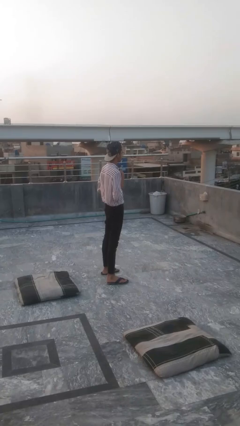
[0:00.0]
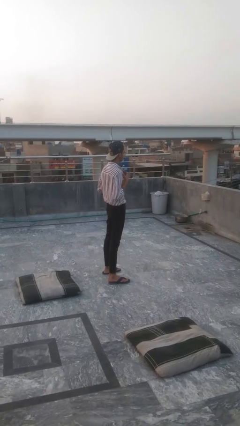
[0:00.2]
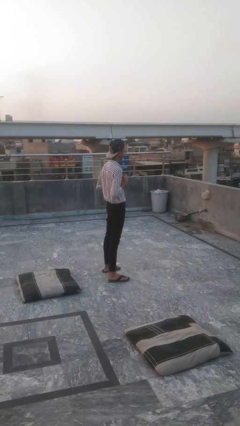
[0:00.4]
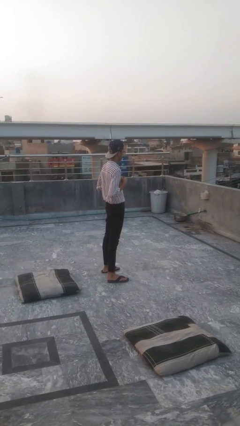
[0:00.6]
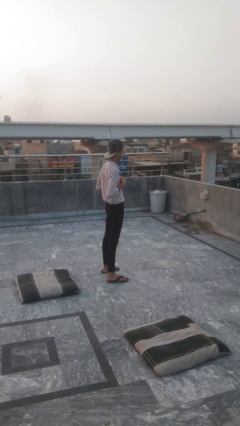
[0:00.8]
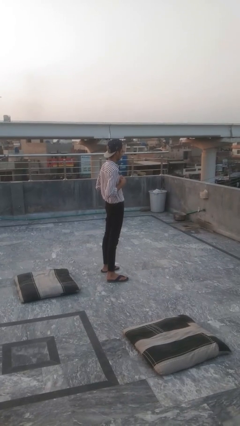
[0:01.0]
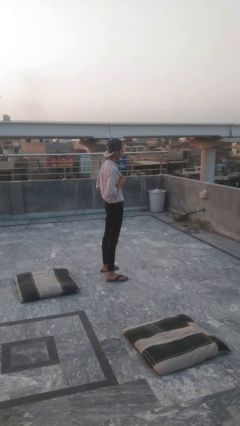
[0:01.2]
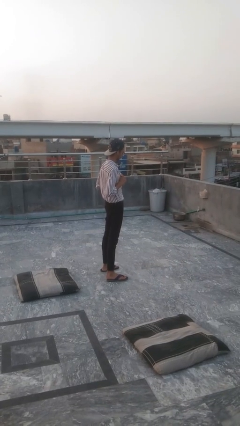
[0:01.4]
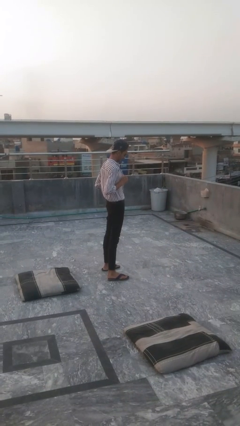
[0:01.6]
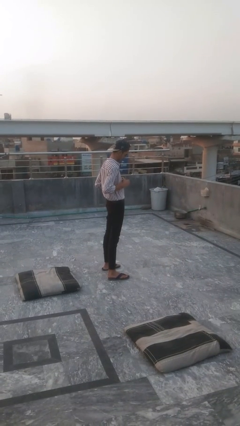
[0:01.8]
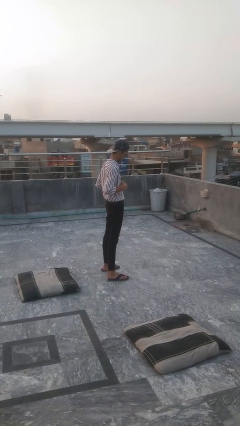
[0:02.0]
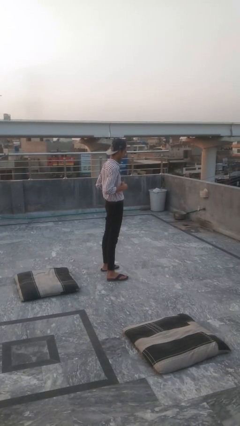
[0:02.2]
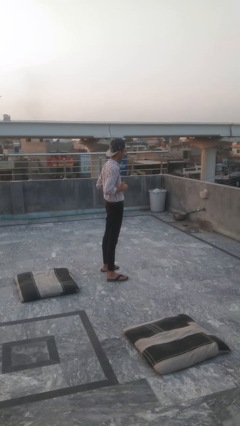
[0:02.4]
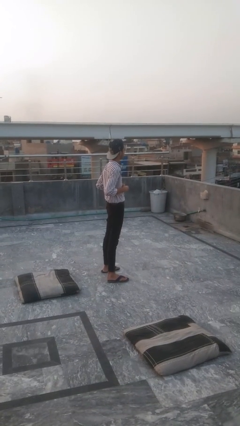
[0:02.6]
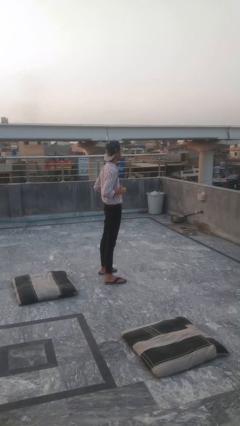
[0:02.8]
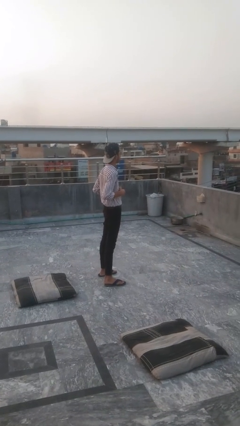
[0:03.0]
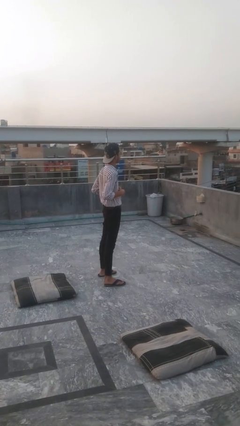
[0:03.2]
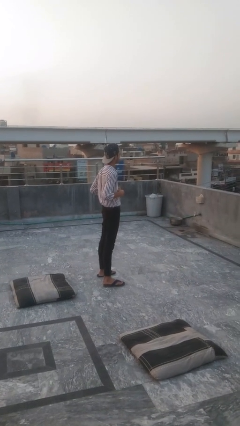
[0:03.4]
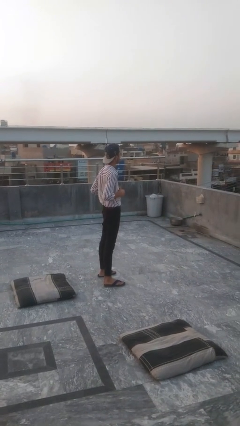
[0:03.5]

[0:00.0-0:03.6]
person unbuttons shirt

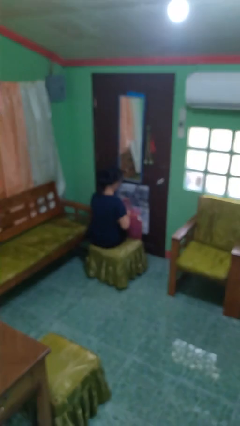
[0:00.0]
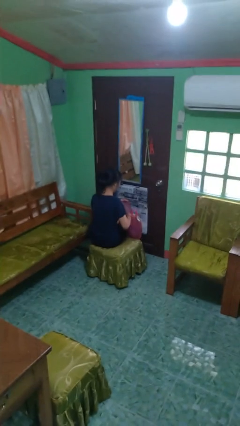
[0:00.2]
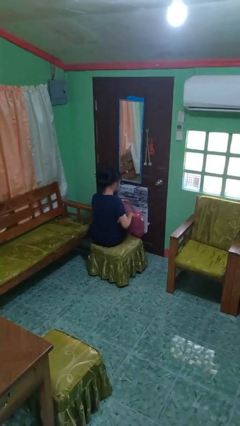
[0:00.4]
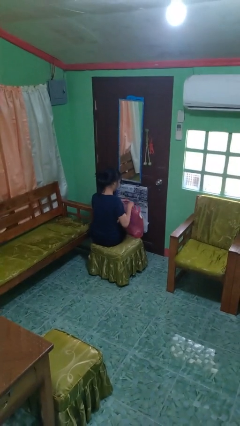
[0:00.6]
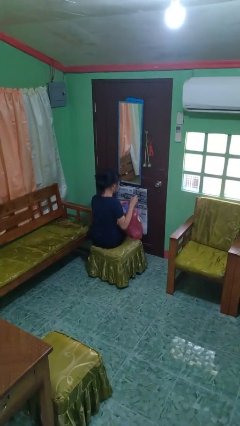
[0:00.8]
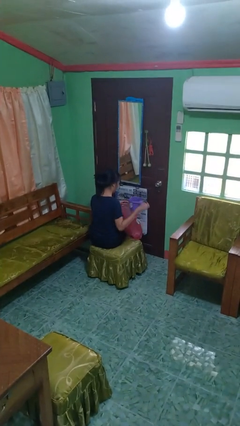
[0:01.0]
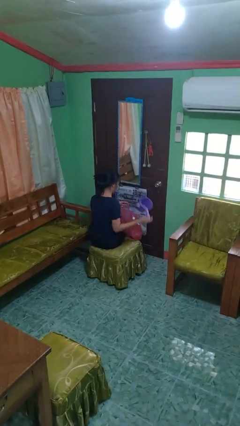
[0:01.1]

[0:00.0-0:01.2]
person takes object from bag

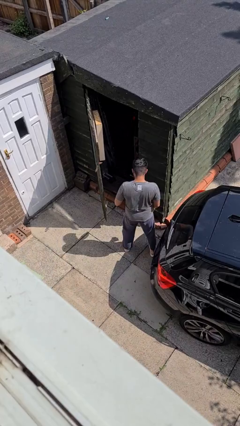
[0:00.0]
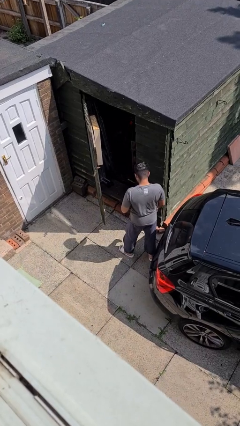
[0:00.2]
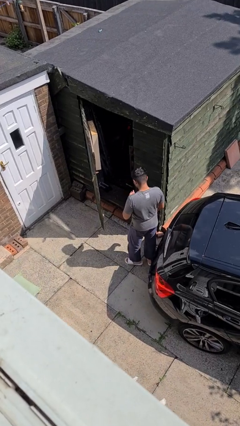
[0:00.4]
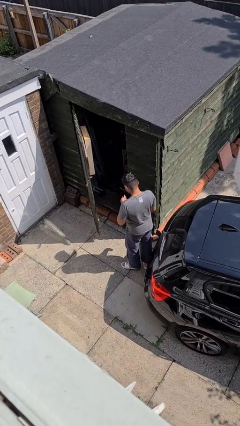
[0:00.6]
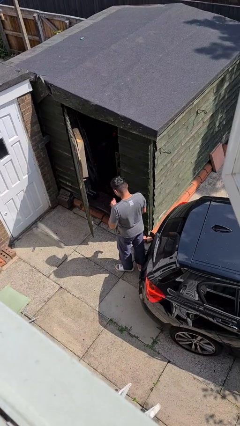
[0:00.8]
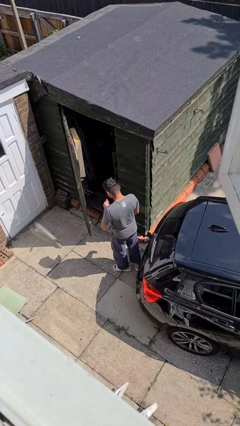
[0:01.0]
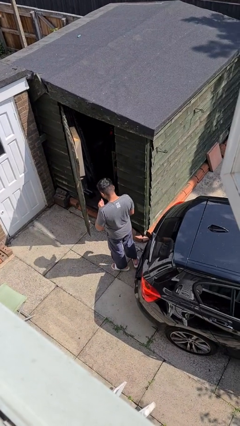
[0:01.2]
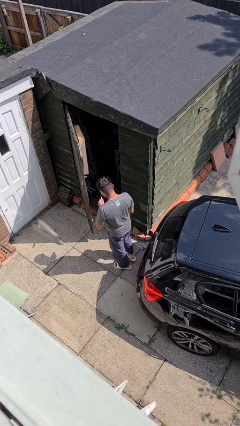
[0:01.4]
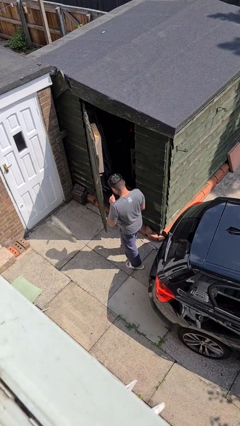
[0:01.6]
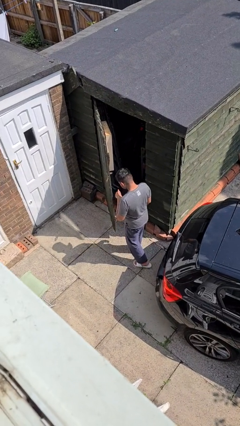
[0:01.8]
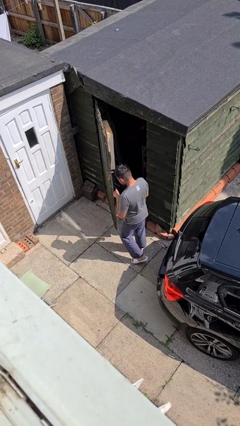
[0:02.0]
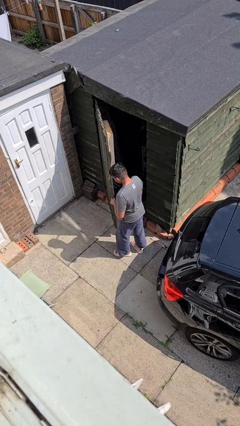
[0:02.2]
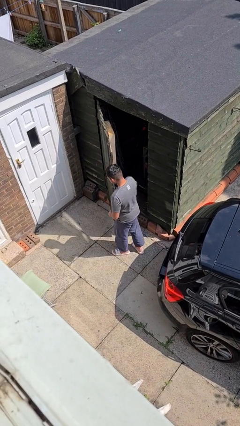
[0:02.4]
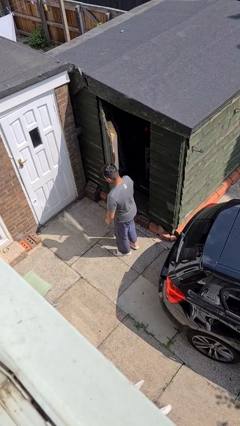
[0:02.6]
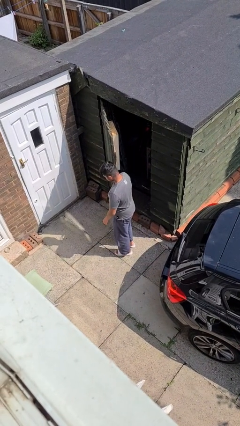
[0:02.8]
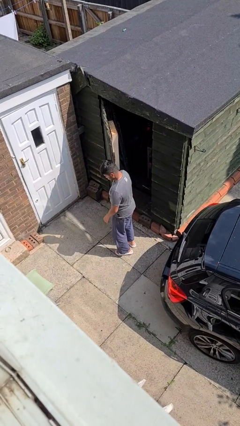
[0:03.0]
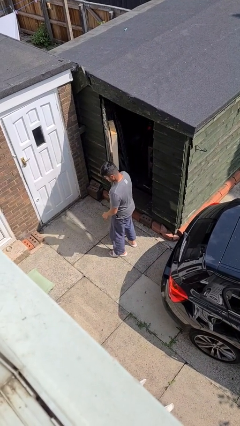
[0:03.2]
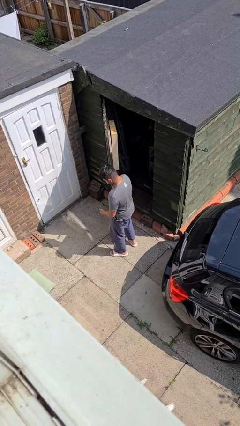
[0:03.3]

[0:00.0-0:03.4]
person bumps into wall

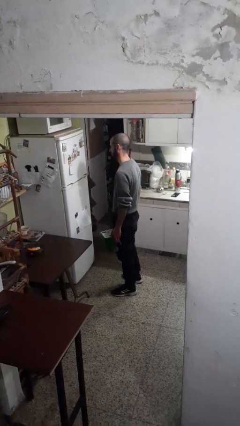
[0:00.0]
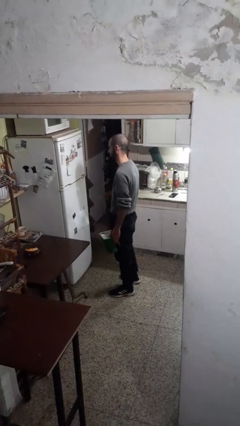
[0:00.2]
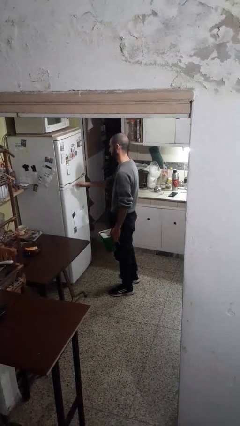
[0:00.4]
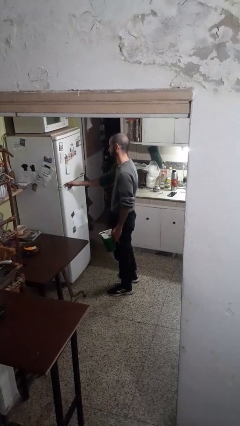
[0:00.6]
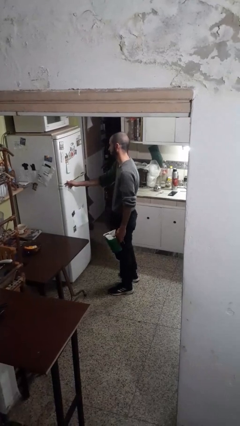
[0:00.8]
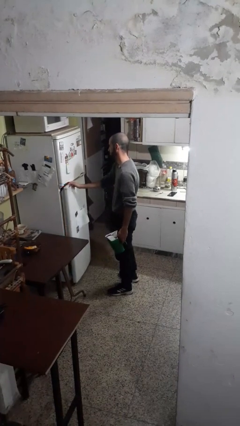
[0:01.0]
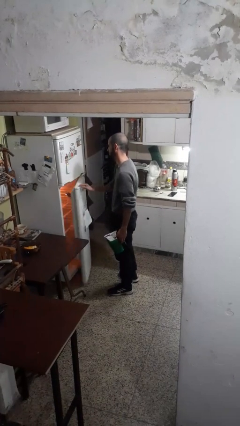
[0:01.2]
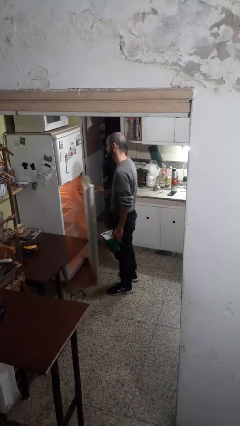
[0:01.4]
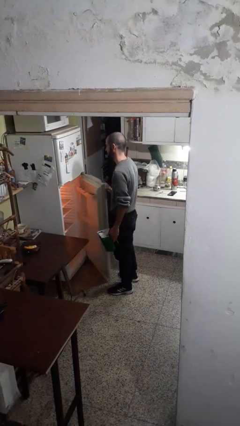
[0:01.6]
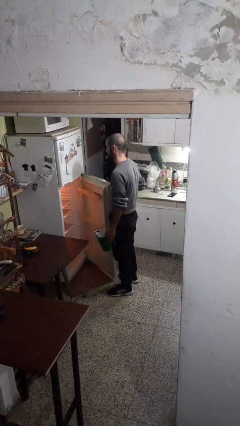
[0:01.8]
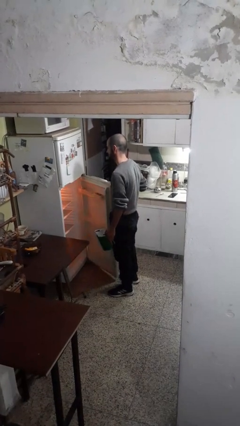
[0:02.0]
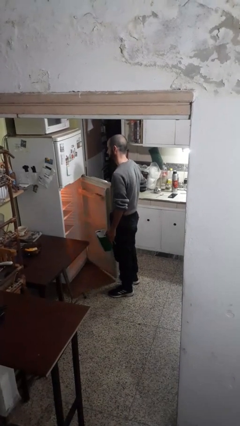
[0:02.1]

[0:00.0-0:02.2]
person opens refrigerator

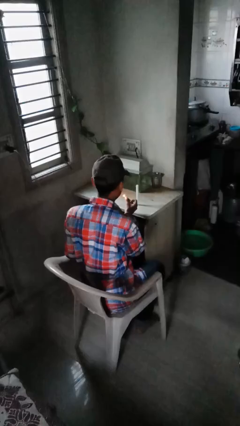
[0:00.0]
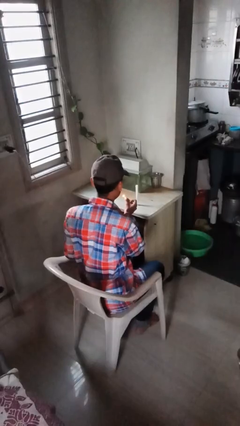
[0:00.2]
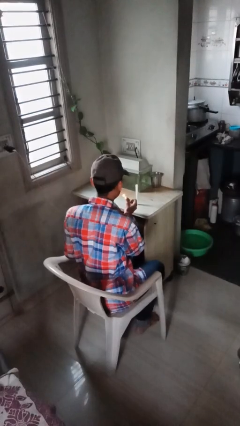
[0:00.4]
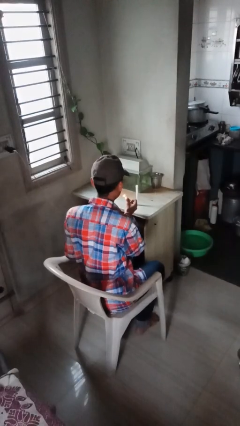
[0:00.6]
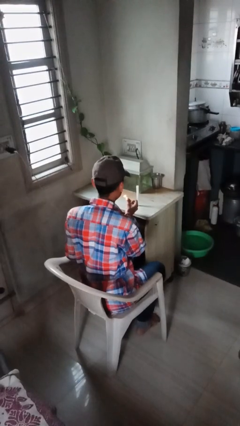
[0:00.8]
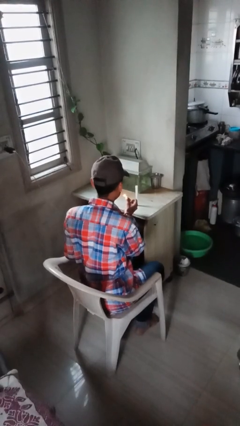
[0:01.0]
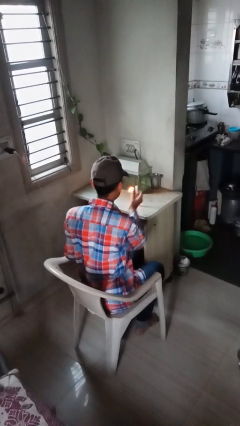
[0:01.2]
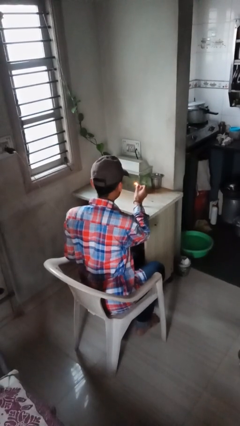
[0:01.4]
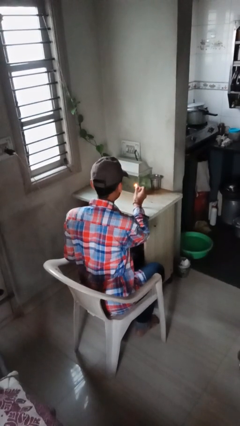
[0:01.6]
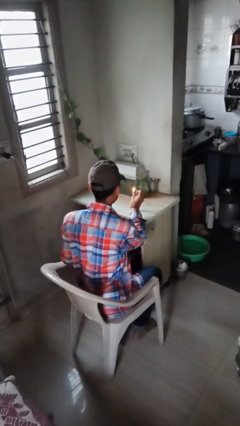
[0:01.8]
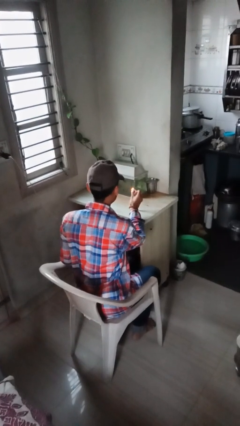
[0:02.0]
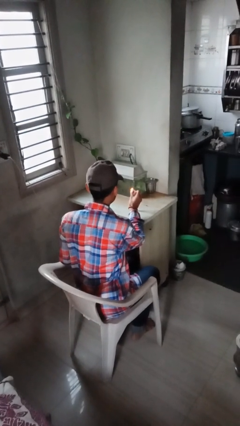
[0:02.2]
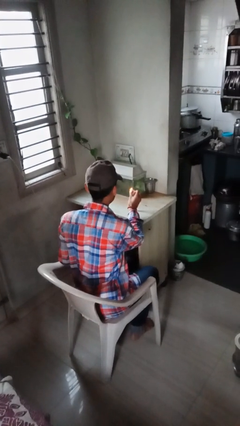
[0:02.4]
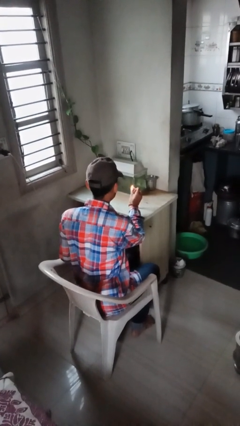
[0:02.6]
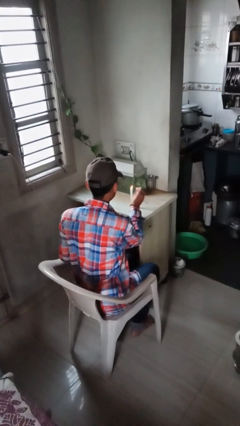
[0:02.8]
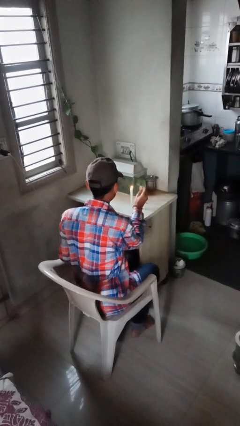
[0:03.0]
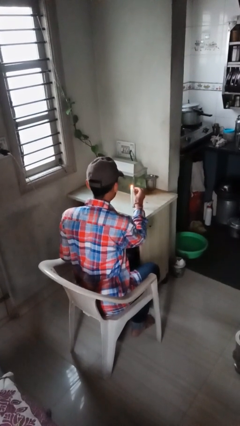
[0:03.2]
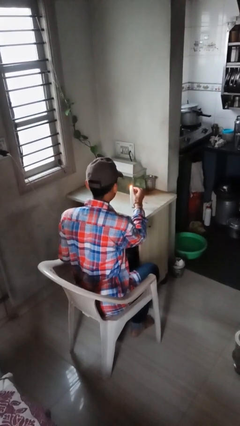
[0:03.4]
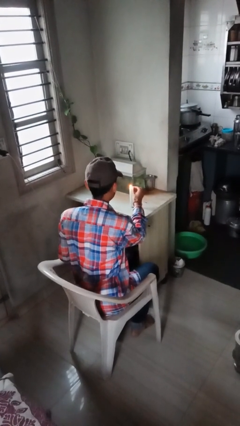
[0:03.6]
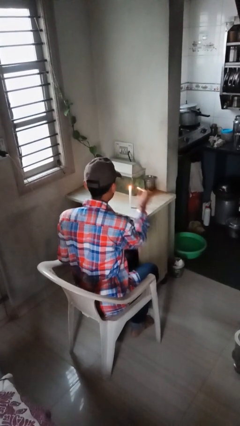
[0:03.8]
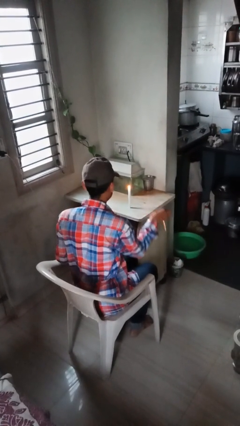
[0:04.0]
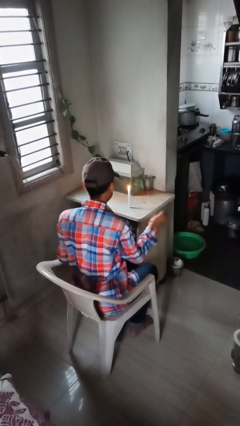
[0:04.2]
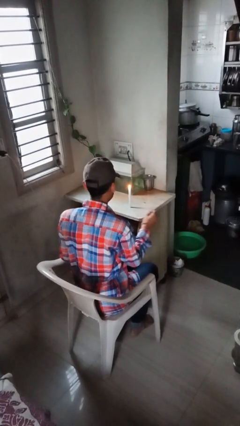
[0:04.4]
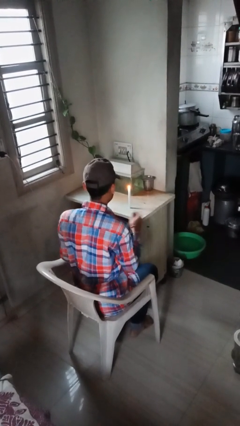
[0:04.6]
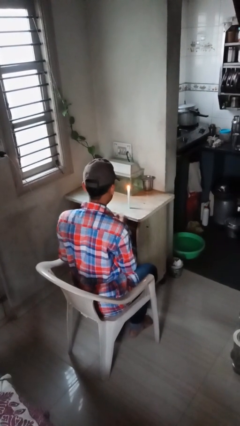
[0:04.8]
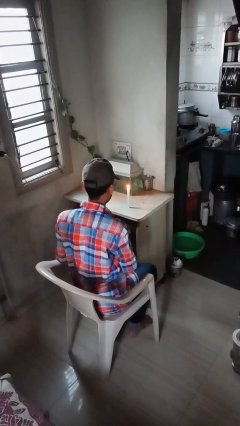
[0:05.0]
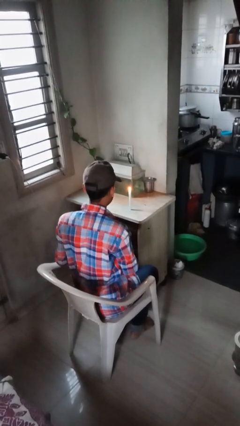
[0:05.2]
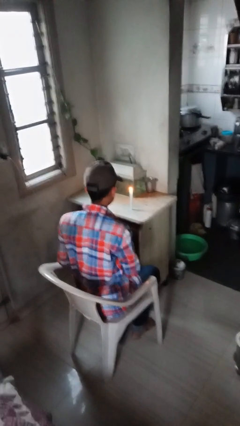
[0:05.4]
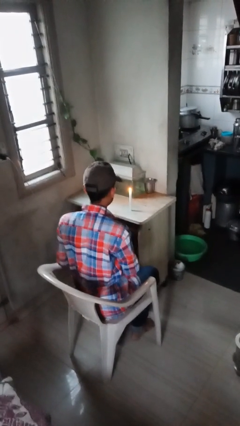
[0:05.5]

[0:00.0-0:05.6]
person lights candle

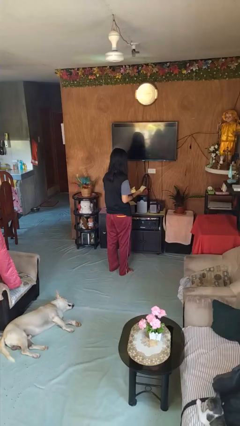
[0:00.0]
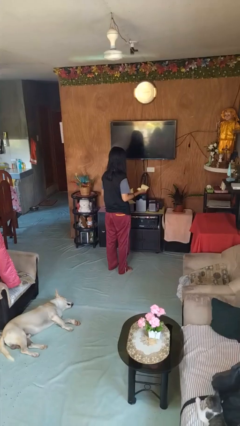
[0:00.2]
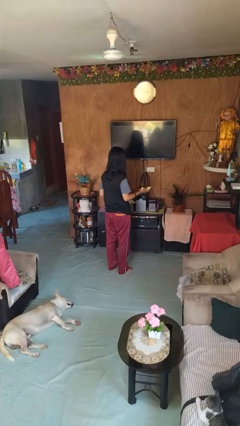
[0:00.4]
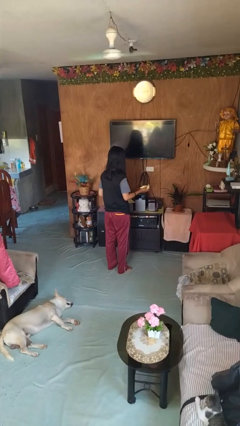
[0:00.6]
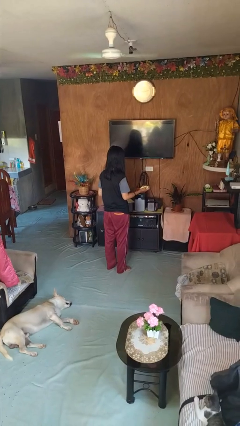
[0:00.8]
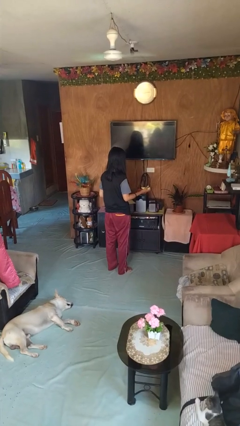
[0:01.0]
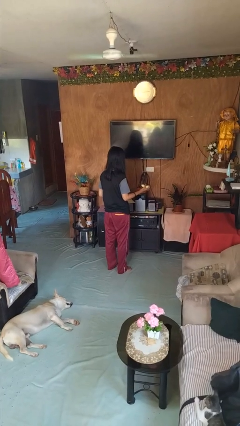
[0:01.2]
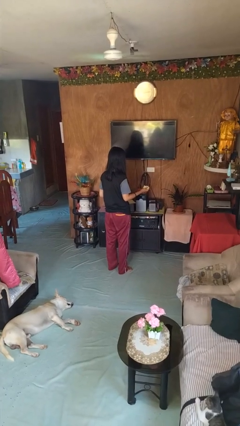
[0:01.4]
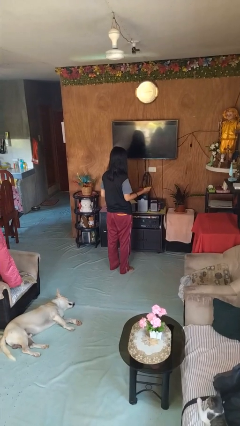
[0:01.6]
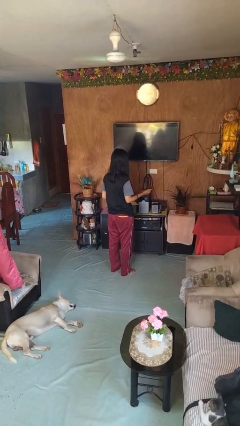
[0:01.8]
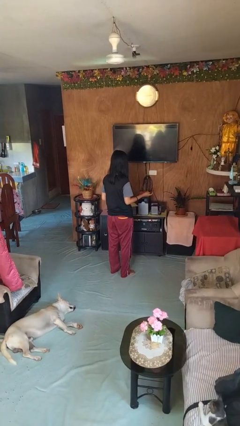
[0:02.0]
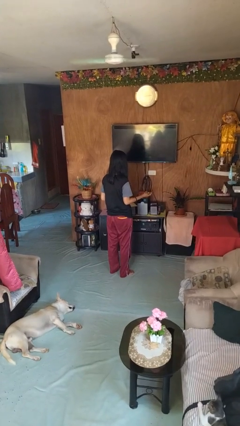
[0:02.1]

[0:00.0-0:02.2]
person crumples paper
